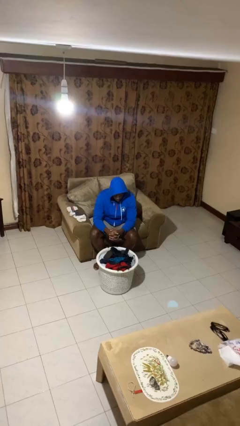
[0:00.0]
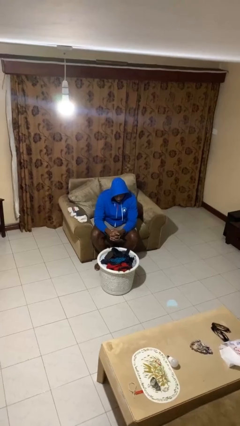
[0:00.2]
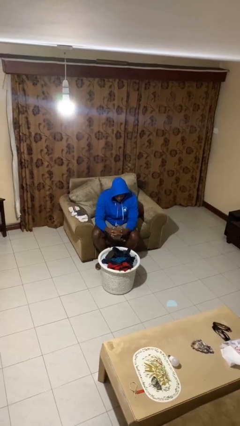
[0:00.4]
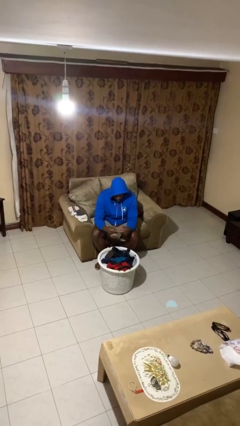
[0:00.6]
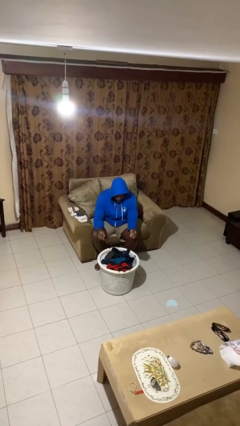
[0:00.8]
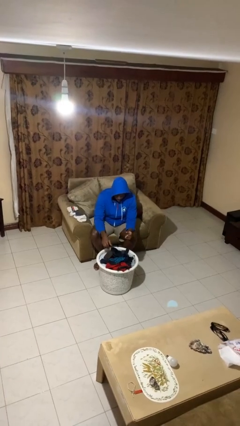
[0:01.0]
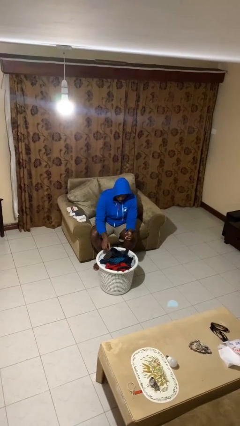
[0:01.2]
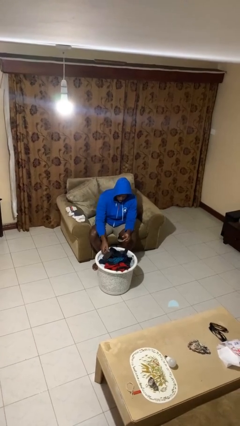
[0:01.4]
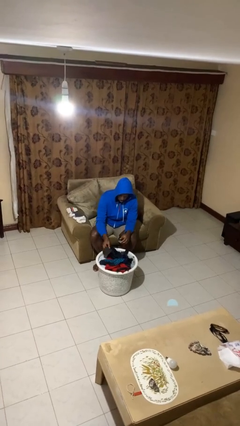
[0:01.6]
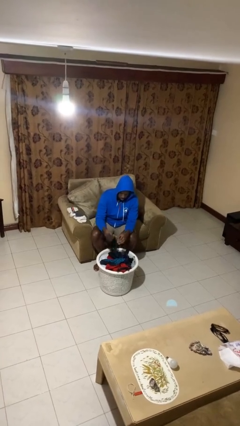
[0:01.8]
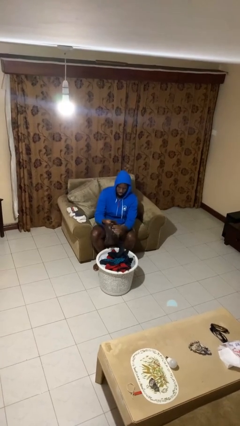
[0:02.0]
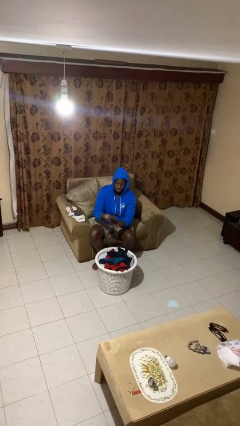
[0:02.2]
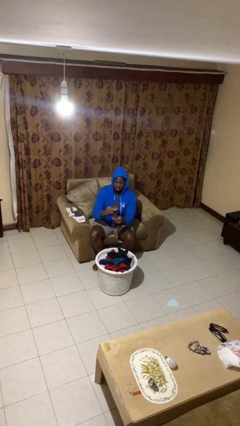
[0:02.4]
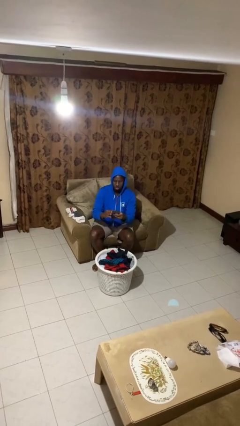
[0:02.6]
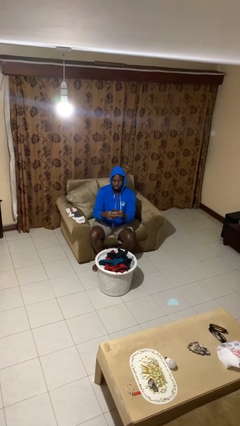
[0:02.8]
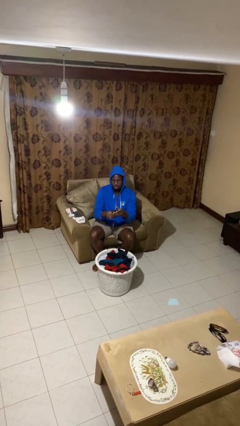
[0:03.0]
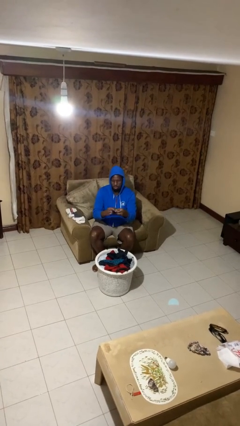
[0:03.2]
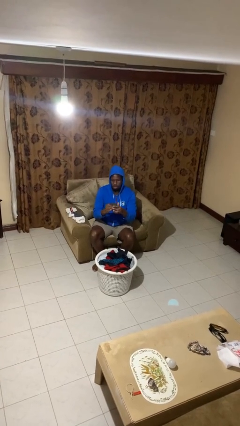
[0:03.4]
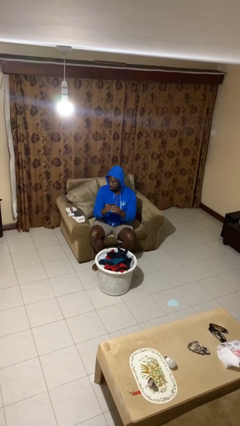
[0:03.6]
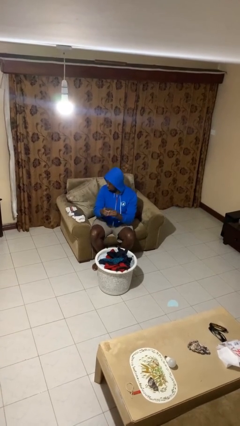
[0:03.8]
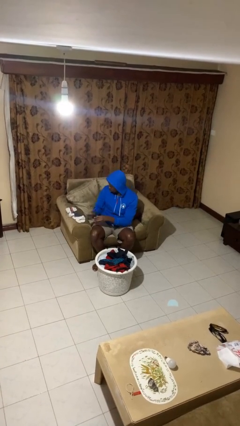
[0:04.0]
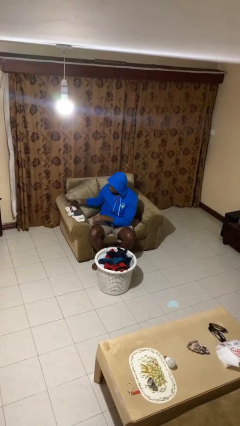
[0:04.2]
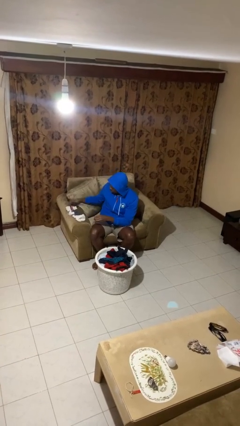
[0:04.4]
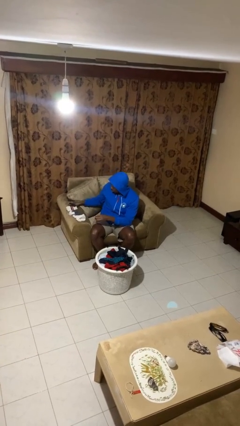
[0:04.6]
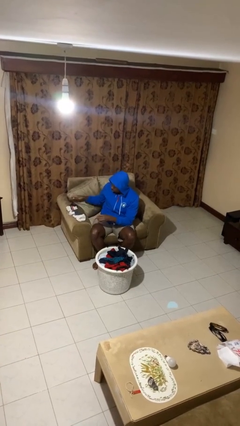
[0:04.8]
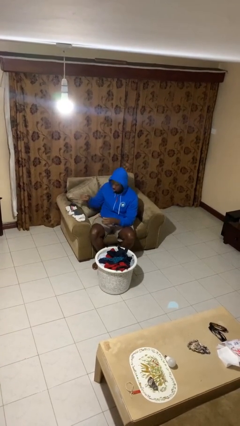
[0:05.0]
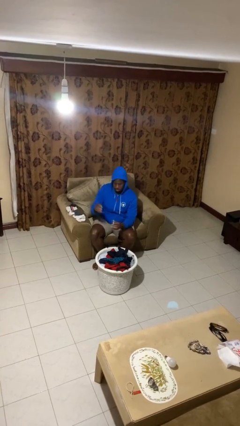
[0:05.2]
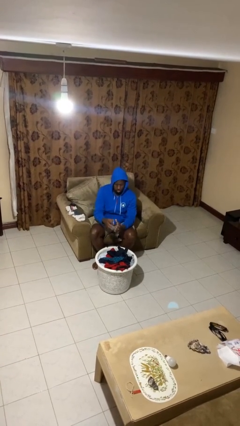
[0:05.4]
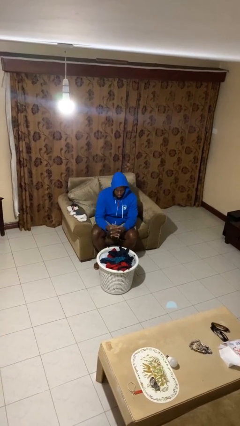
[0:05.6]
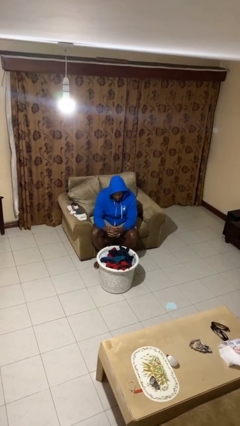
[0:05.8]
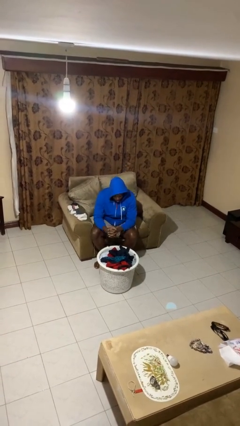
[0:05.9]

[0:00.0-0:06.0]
person folds socks

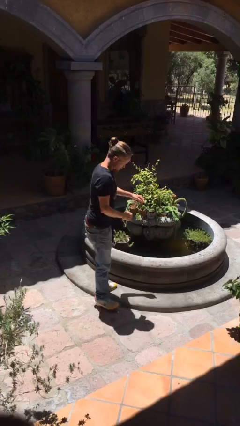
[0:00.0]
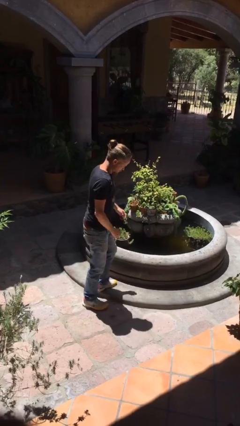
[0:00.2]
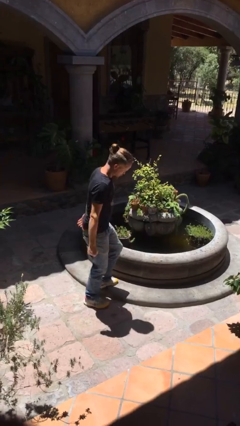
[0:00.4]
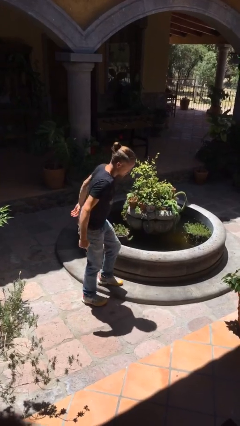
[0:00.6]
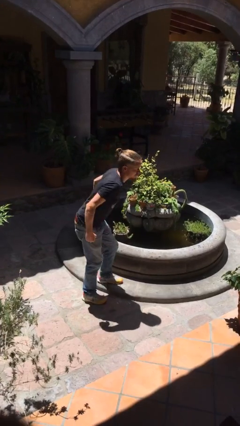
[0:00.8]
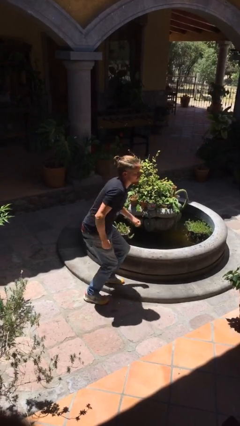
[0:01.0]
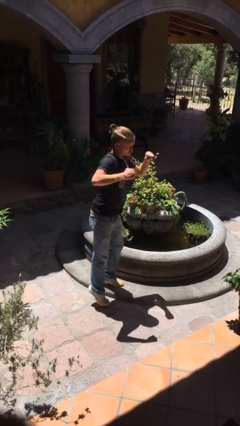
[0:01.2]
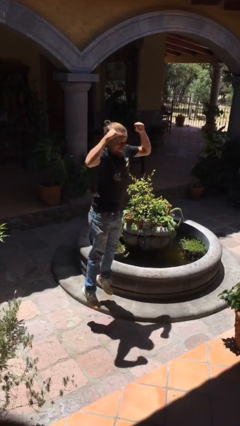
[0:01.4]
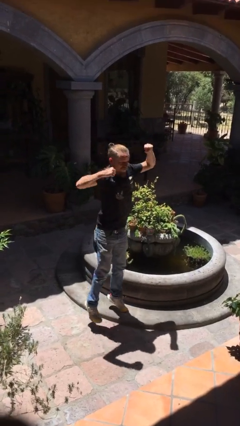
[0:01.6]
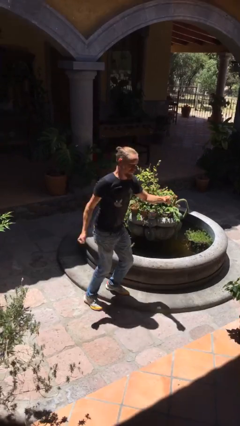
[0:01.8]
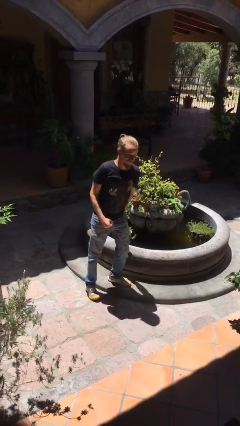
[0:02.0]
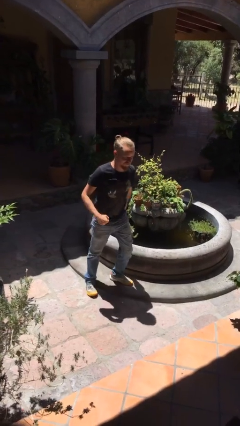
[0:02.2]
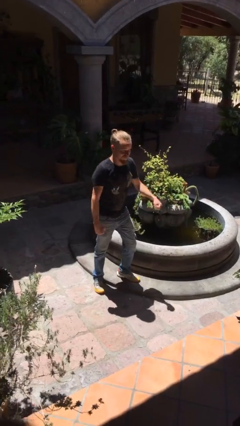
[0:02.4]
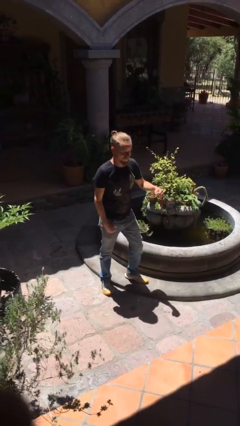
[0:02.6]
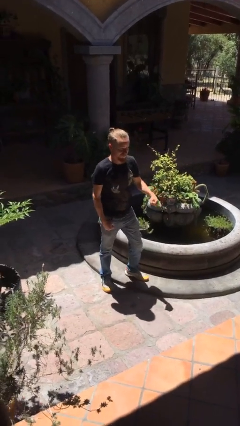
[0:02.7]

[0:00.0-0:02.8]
person jumps

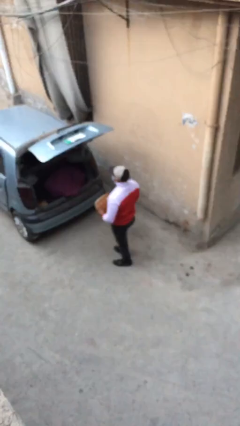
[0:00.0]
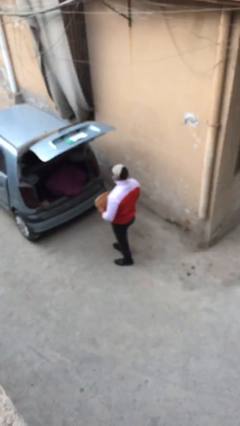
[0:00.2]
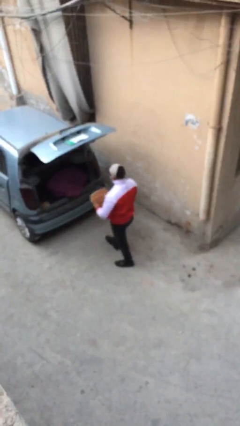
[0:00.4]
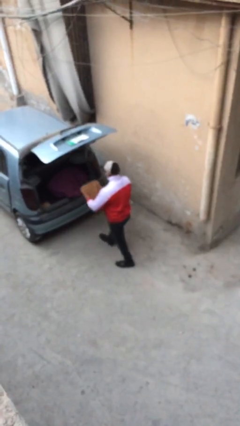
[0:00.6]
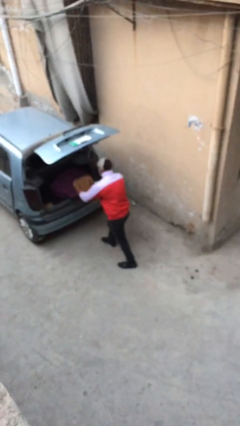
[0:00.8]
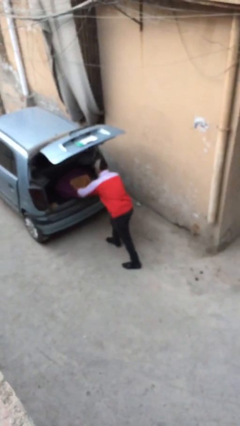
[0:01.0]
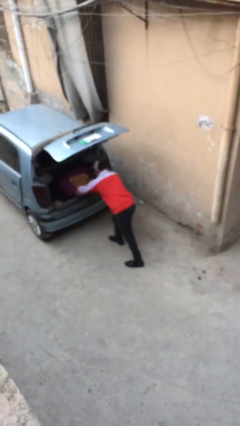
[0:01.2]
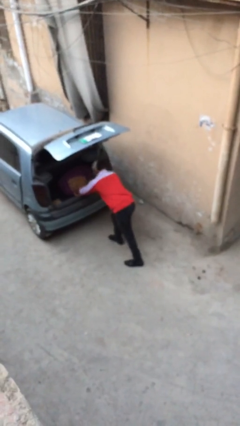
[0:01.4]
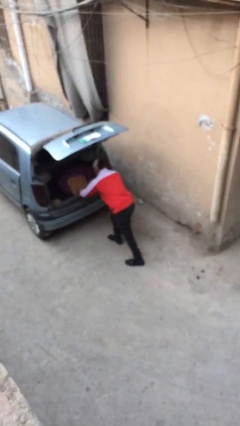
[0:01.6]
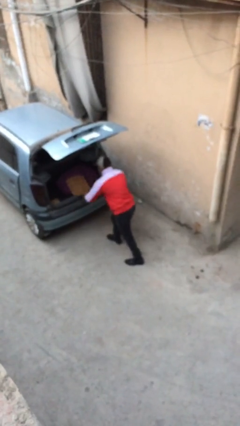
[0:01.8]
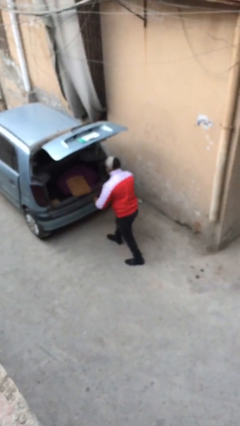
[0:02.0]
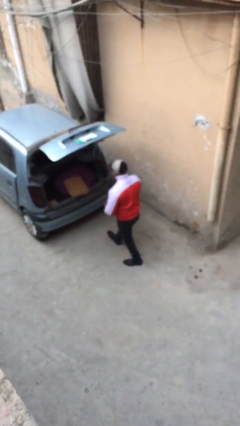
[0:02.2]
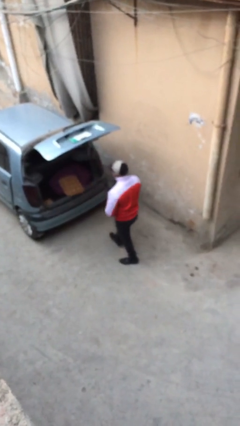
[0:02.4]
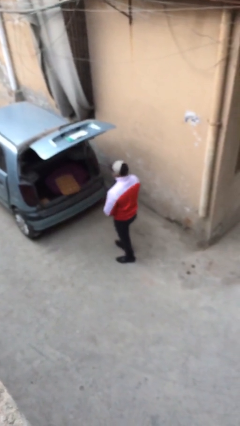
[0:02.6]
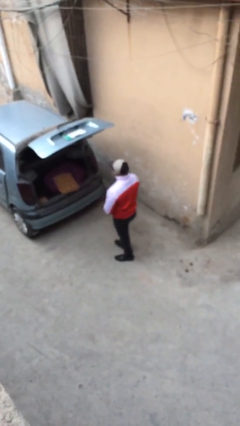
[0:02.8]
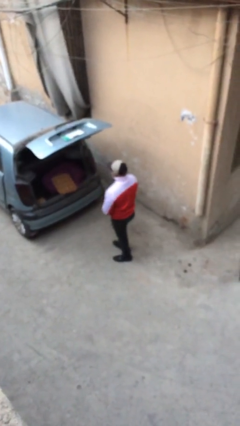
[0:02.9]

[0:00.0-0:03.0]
person loads car

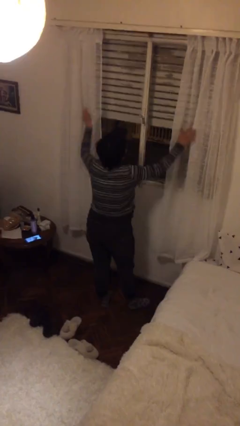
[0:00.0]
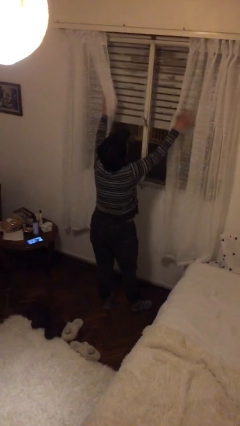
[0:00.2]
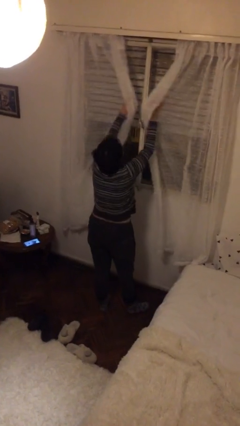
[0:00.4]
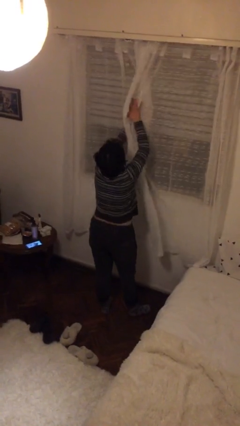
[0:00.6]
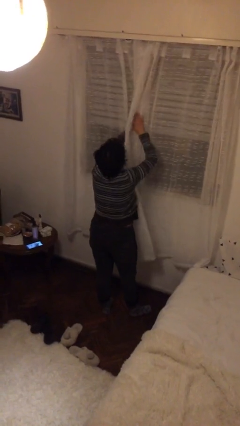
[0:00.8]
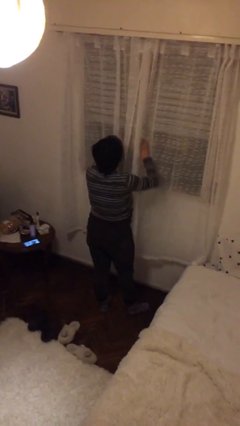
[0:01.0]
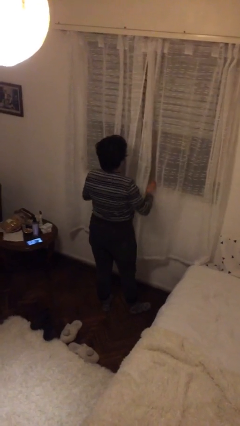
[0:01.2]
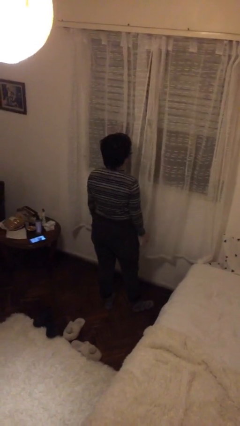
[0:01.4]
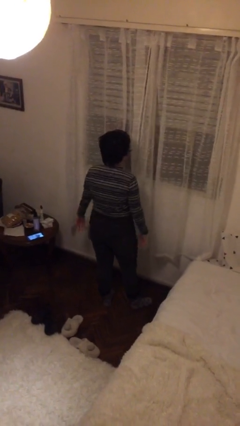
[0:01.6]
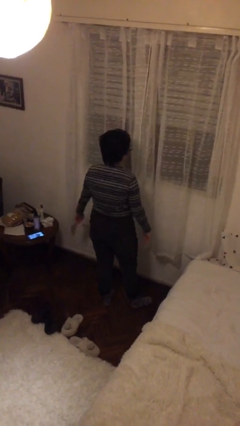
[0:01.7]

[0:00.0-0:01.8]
person closes curtains

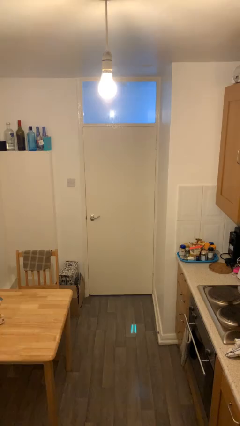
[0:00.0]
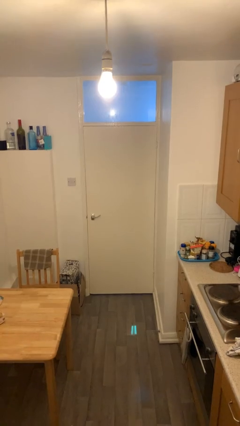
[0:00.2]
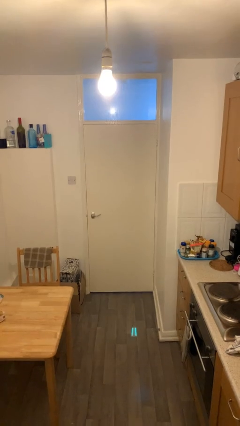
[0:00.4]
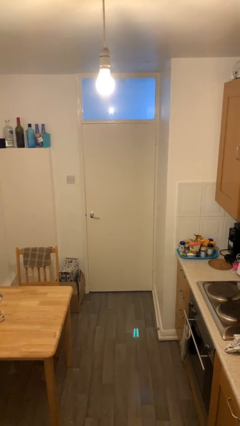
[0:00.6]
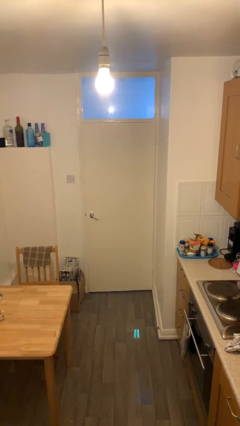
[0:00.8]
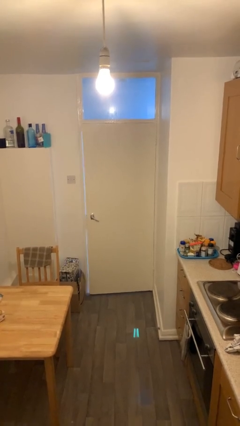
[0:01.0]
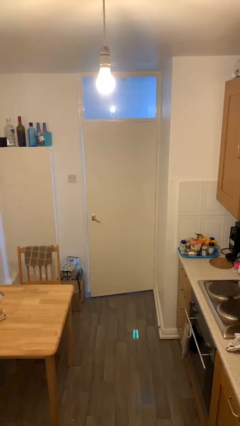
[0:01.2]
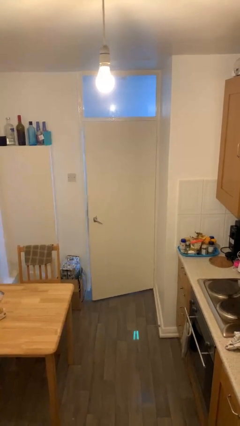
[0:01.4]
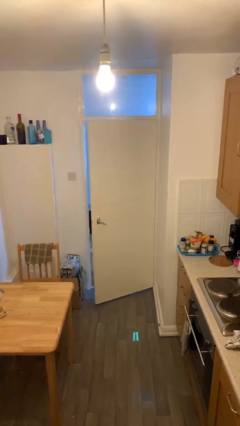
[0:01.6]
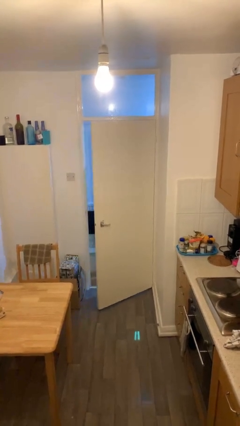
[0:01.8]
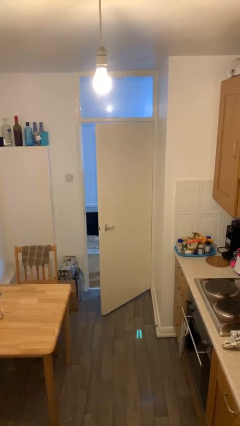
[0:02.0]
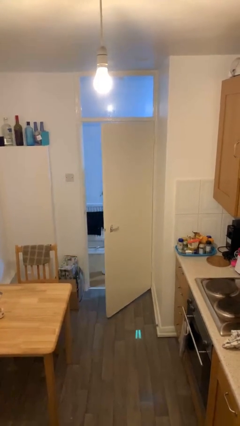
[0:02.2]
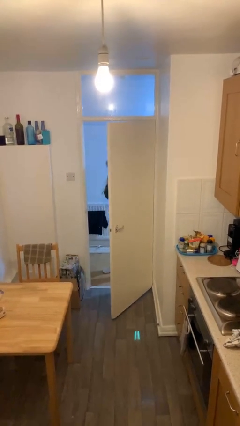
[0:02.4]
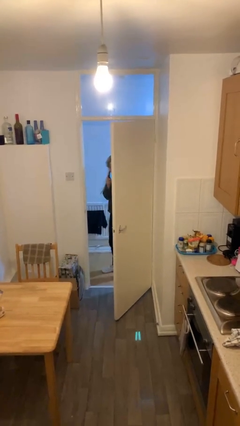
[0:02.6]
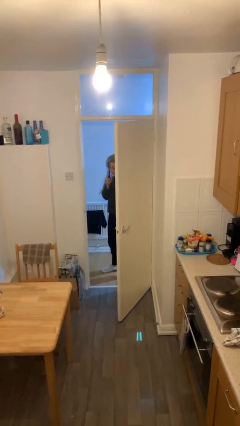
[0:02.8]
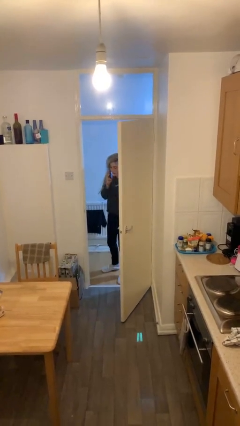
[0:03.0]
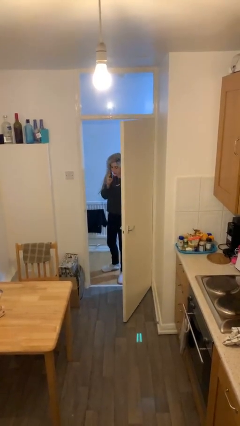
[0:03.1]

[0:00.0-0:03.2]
person opens facility door

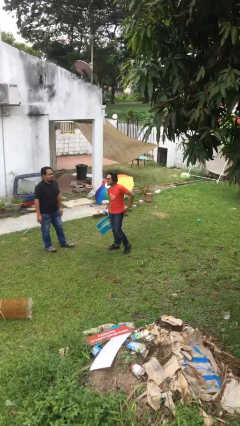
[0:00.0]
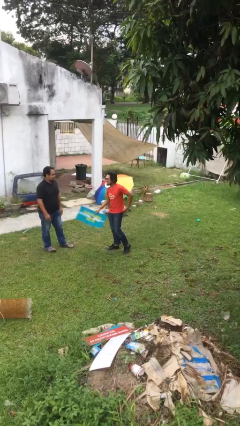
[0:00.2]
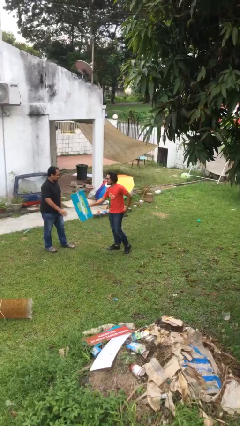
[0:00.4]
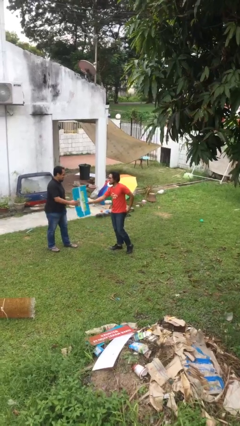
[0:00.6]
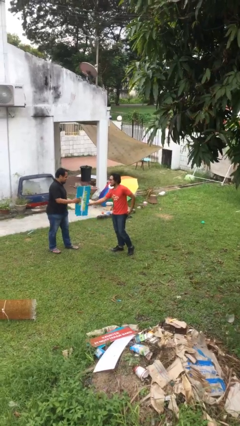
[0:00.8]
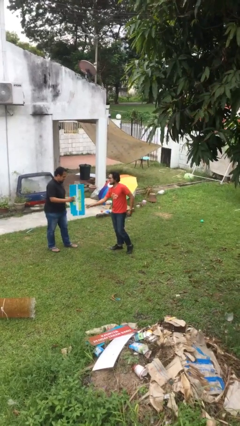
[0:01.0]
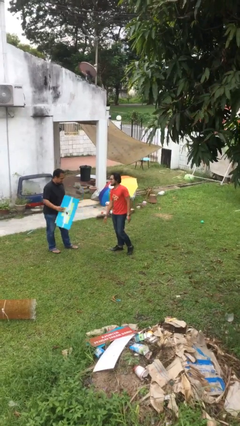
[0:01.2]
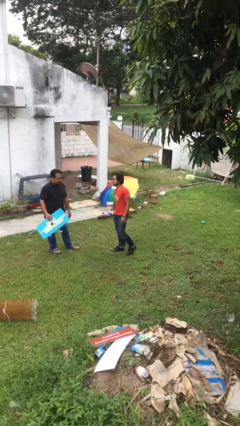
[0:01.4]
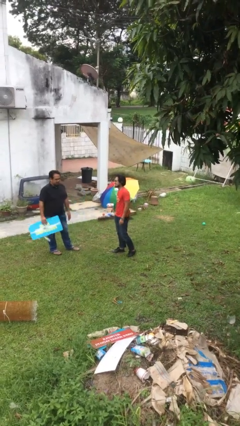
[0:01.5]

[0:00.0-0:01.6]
person transfers object to person
